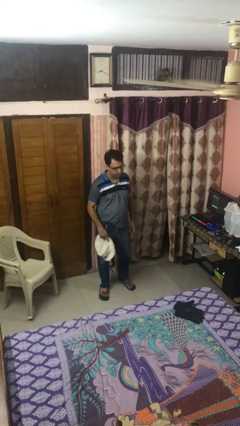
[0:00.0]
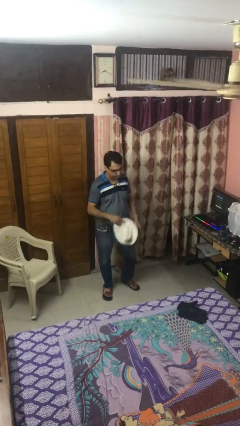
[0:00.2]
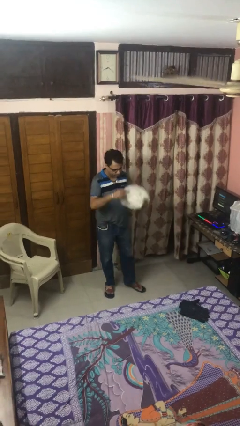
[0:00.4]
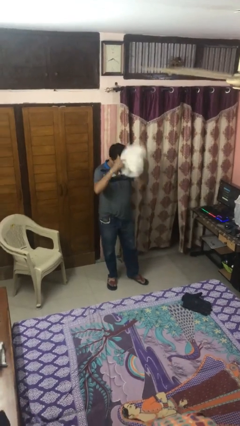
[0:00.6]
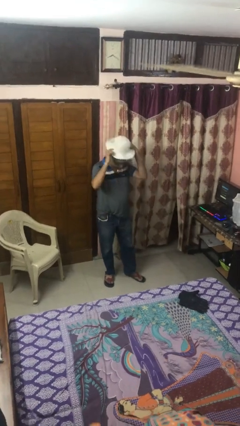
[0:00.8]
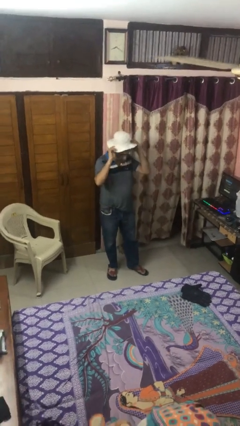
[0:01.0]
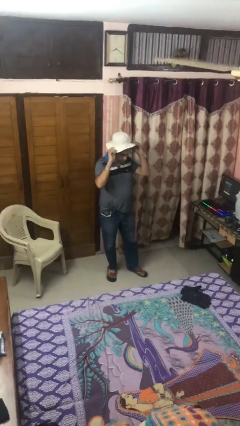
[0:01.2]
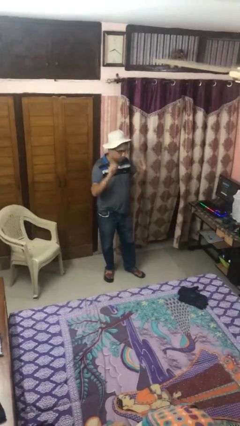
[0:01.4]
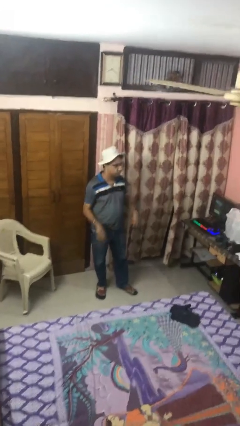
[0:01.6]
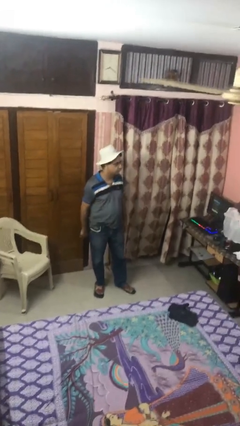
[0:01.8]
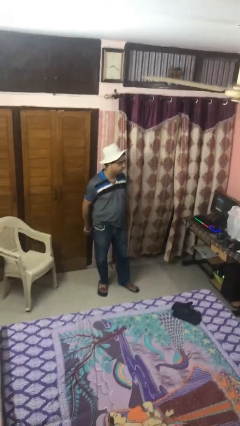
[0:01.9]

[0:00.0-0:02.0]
person puts on hat

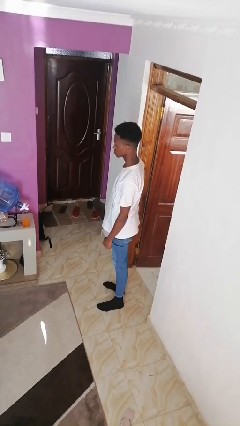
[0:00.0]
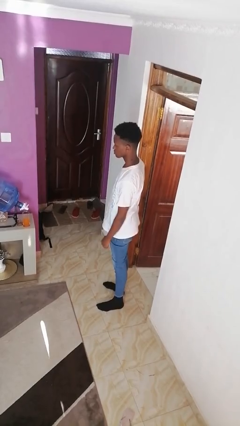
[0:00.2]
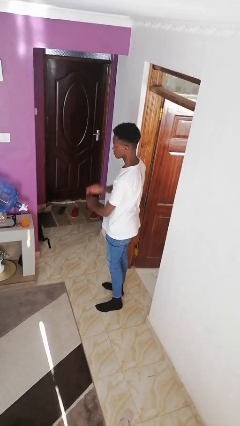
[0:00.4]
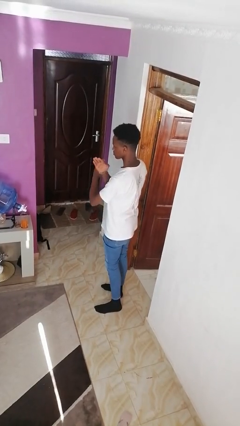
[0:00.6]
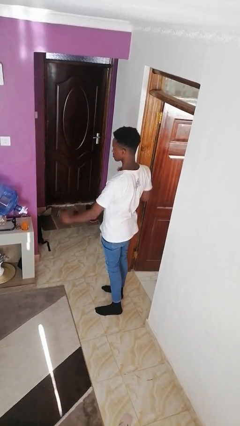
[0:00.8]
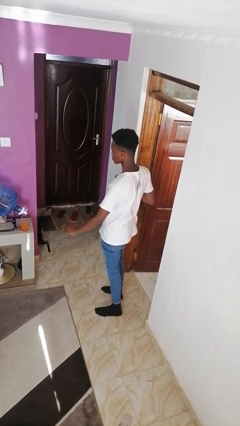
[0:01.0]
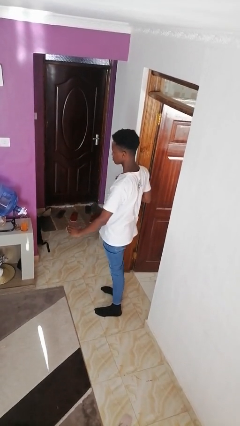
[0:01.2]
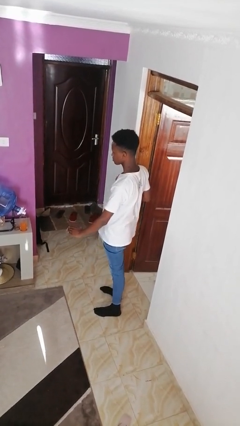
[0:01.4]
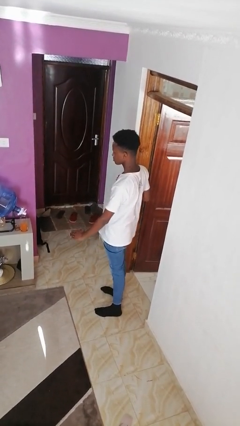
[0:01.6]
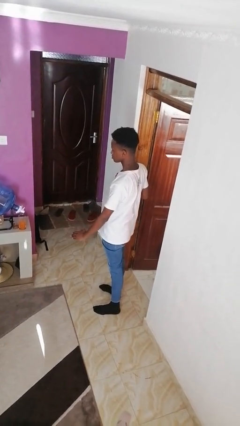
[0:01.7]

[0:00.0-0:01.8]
person karate chop

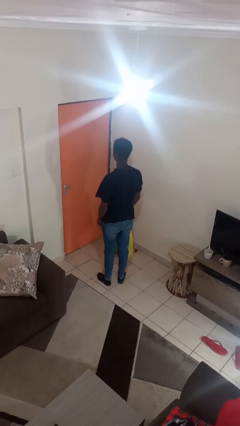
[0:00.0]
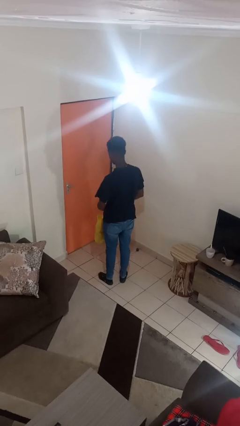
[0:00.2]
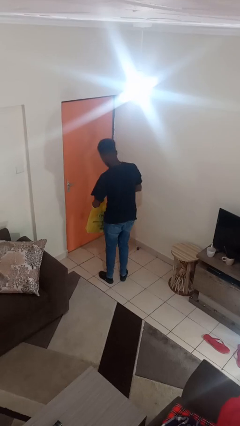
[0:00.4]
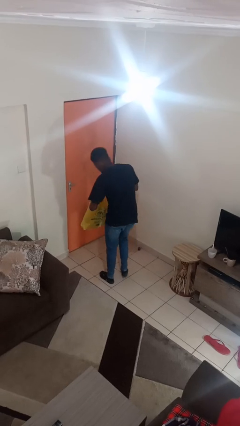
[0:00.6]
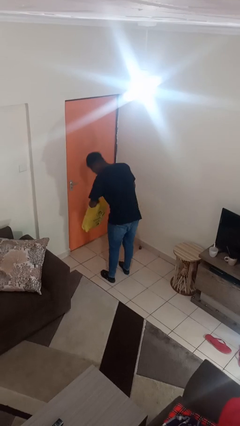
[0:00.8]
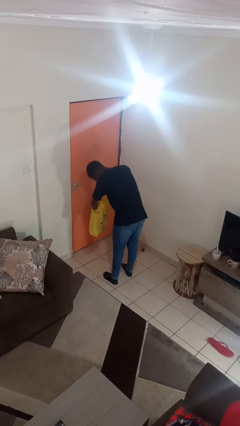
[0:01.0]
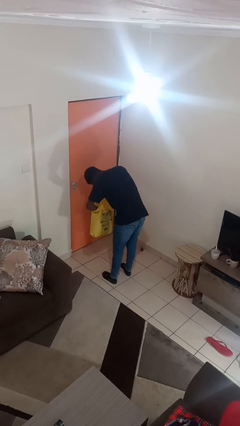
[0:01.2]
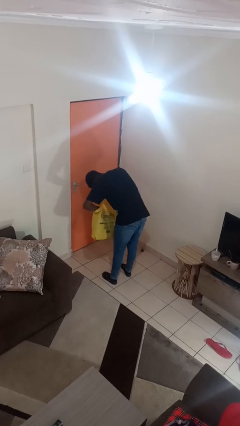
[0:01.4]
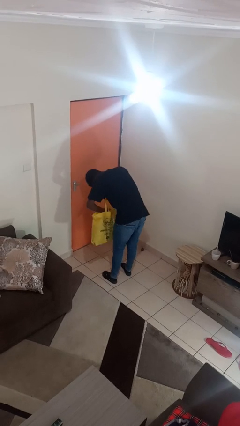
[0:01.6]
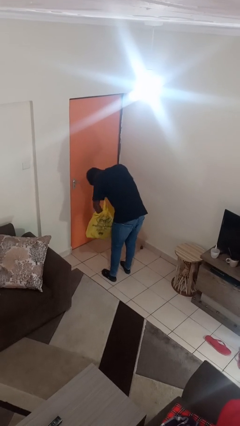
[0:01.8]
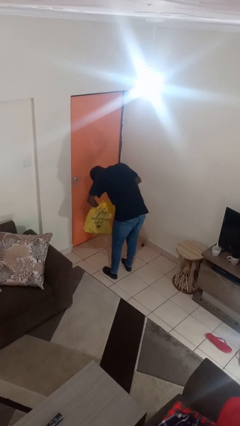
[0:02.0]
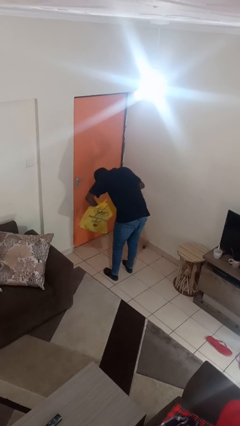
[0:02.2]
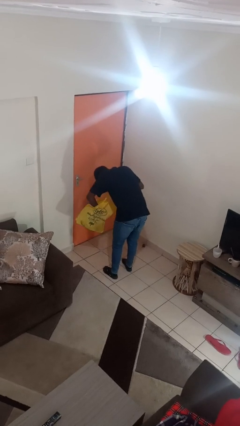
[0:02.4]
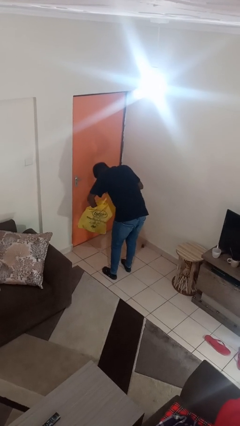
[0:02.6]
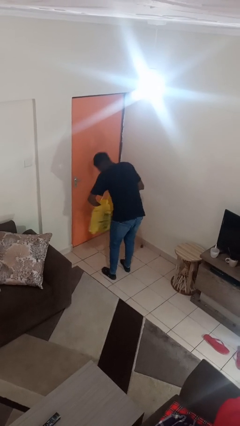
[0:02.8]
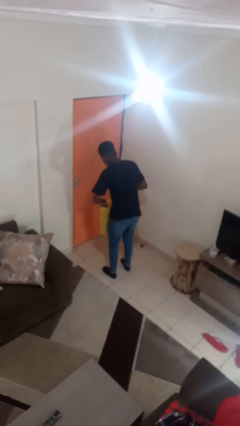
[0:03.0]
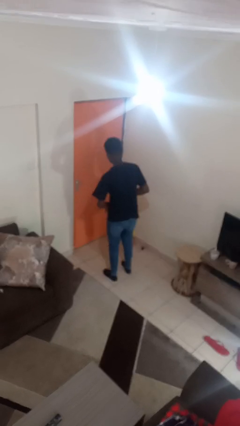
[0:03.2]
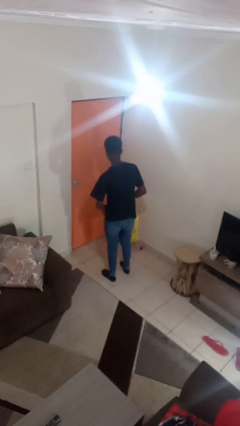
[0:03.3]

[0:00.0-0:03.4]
person searches in bag

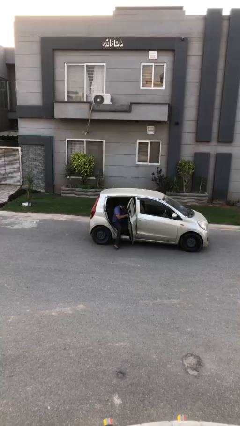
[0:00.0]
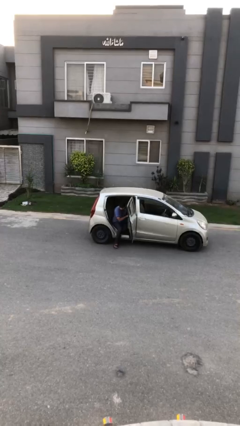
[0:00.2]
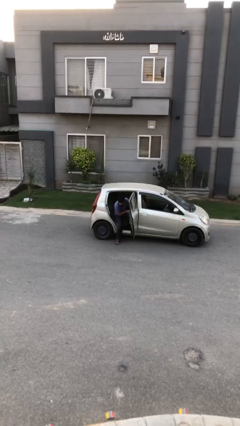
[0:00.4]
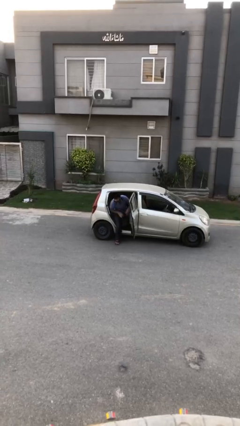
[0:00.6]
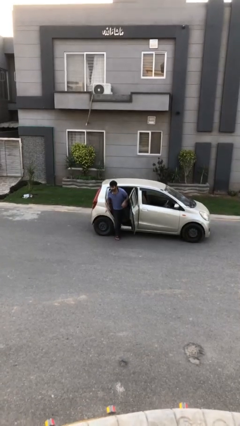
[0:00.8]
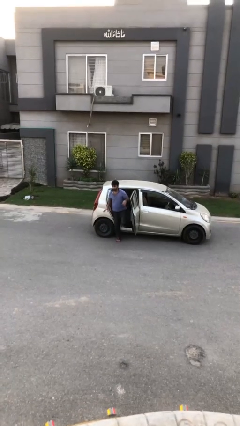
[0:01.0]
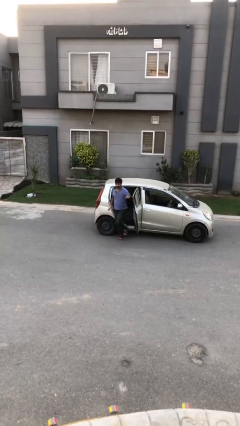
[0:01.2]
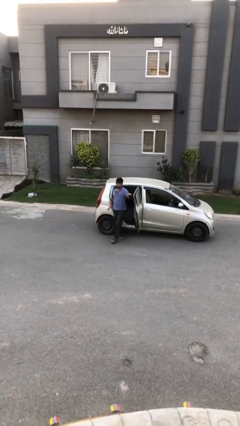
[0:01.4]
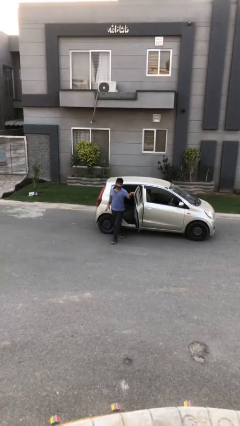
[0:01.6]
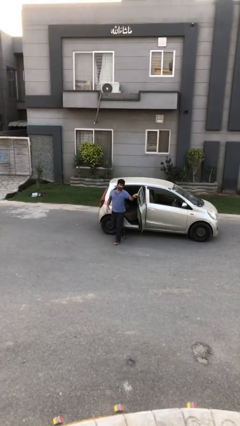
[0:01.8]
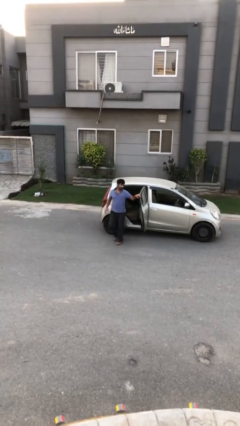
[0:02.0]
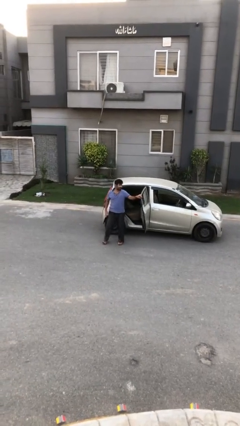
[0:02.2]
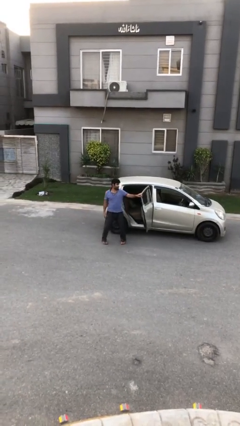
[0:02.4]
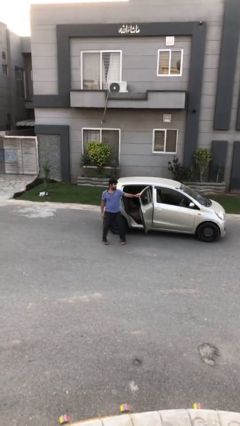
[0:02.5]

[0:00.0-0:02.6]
person exits car

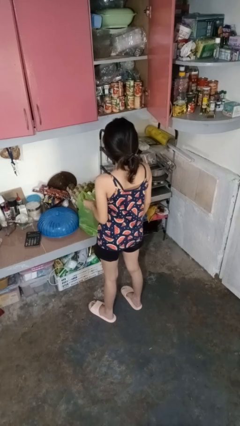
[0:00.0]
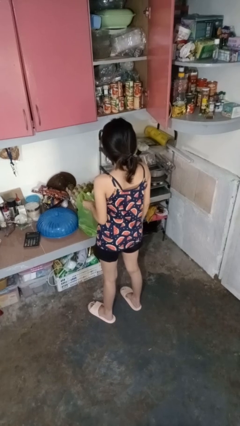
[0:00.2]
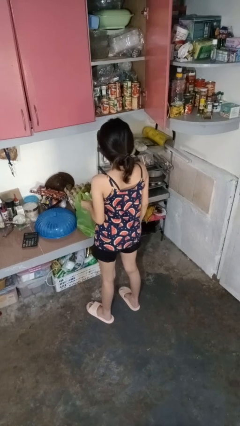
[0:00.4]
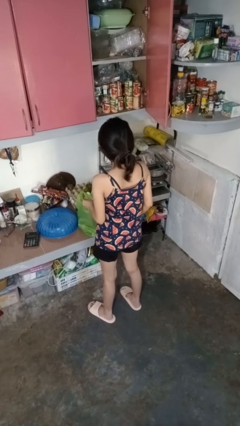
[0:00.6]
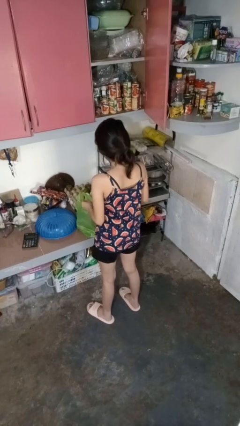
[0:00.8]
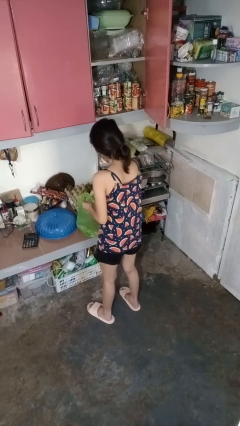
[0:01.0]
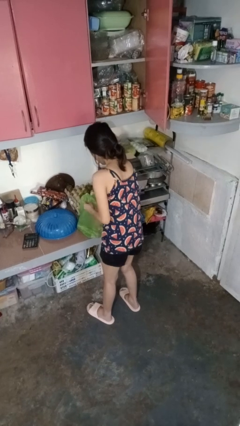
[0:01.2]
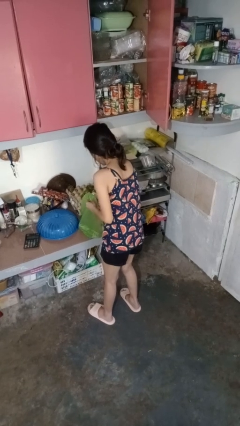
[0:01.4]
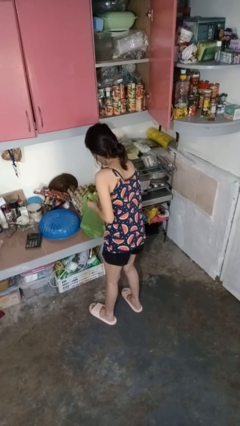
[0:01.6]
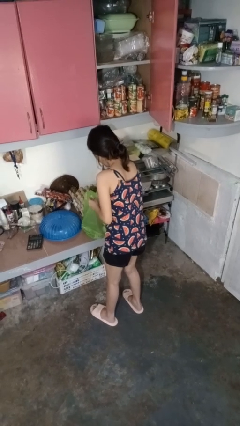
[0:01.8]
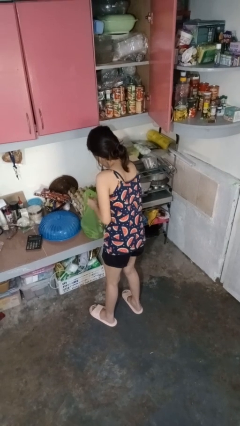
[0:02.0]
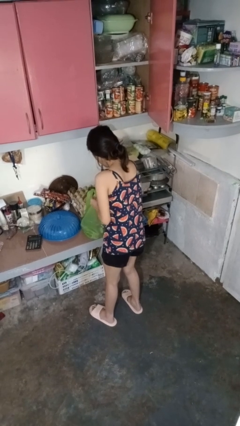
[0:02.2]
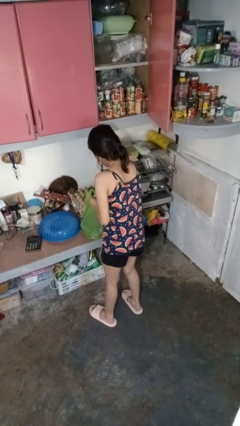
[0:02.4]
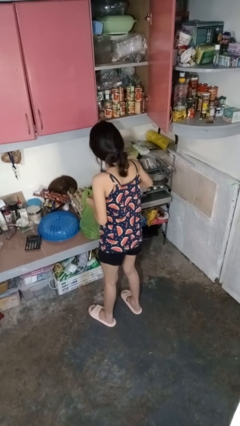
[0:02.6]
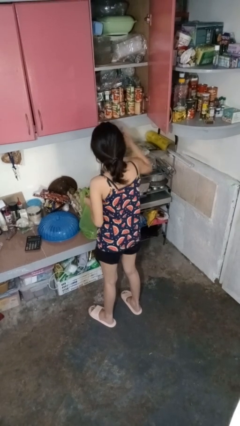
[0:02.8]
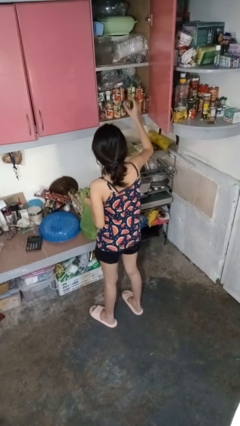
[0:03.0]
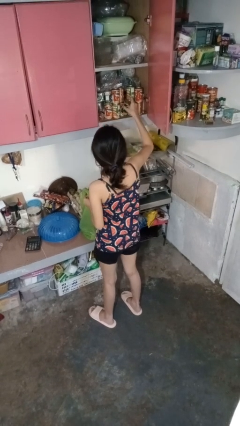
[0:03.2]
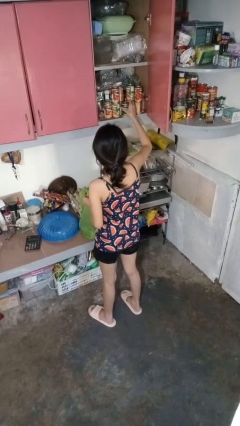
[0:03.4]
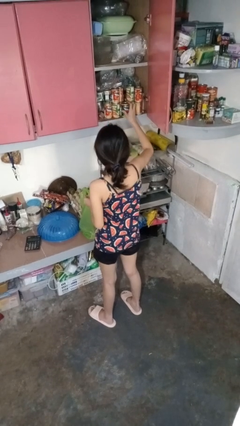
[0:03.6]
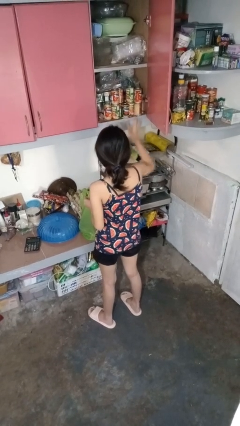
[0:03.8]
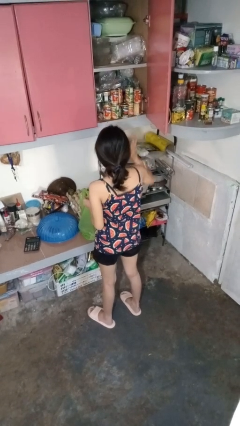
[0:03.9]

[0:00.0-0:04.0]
person loads groceries into cabinet

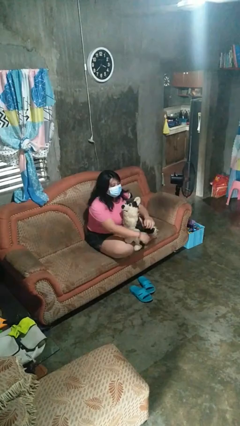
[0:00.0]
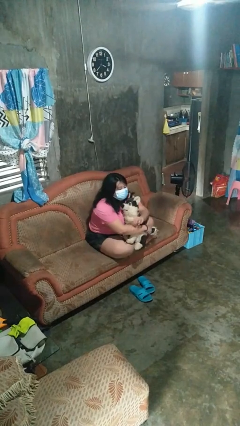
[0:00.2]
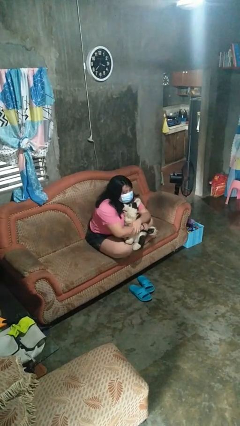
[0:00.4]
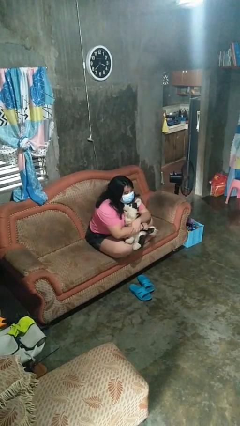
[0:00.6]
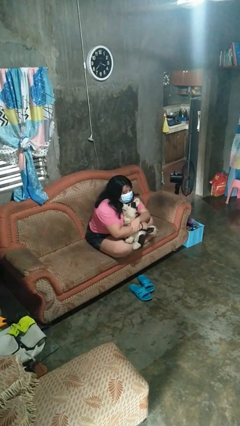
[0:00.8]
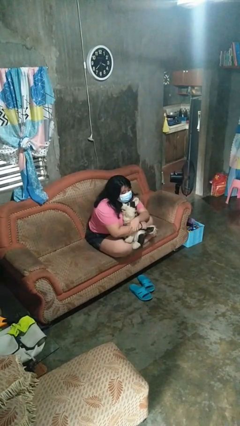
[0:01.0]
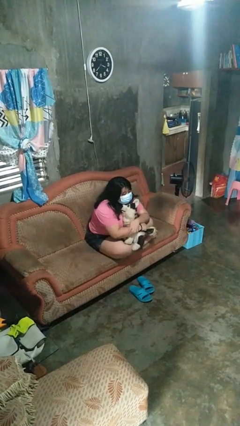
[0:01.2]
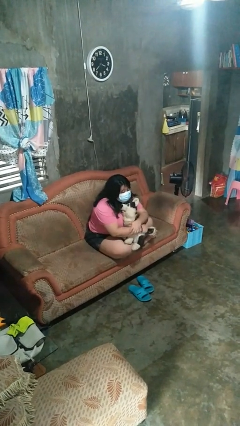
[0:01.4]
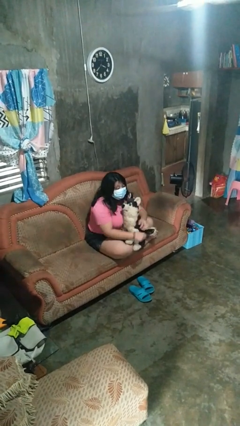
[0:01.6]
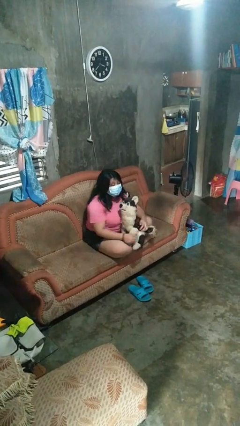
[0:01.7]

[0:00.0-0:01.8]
person hugs stuffed animal

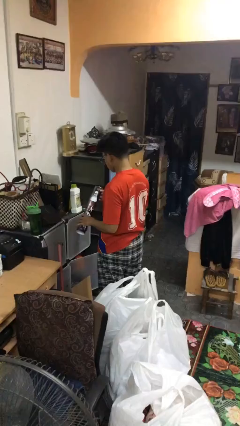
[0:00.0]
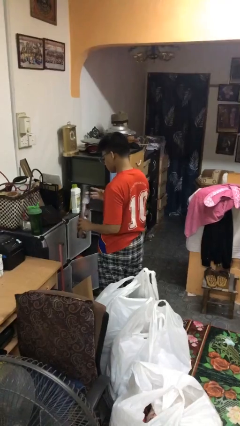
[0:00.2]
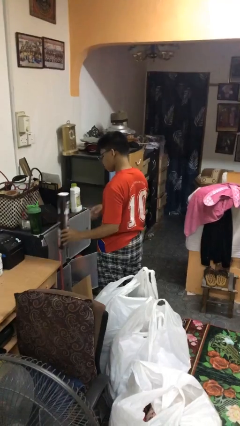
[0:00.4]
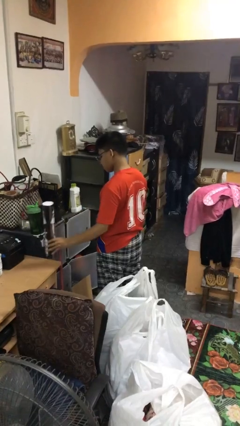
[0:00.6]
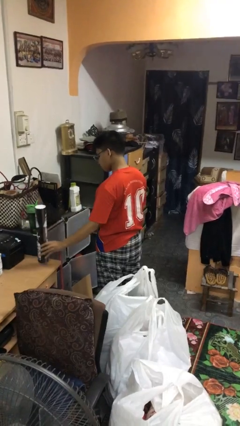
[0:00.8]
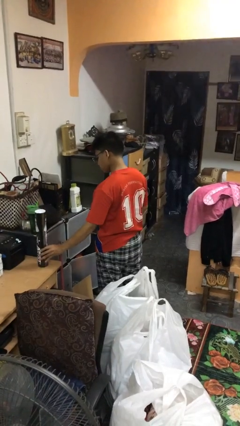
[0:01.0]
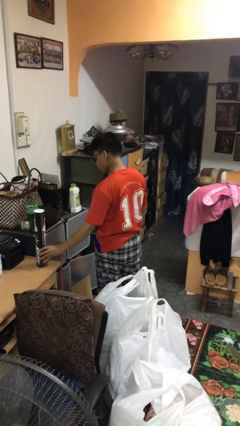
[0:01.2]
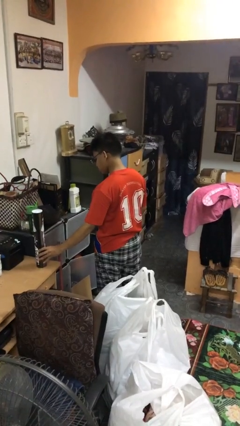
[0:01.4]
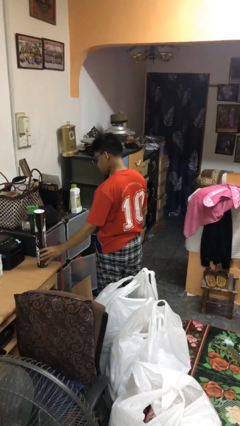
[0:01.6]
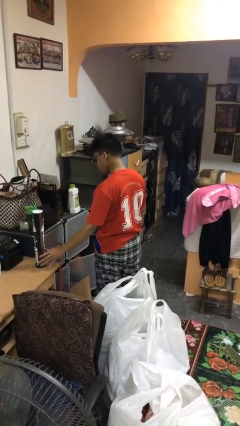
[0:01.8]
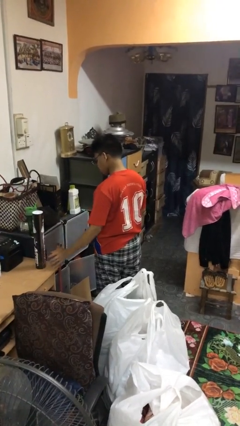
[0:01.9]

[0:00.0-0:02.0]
person puts down object on countertop
